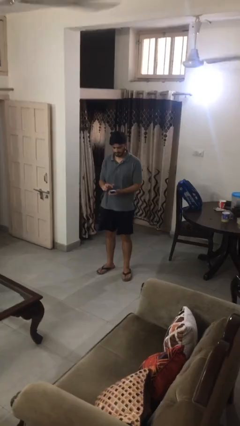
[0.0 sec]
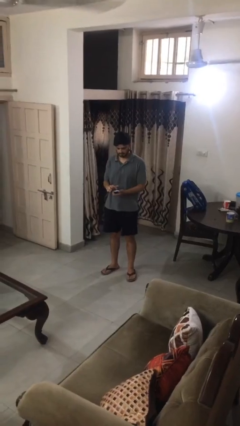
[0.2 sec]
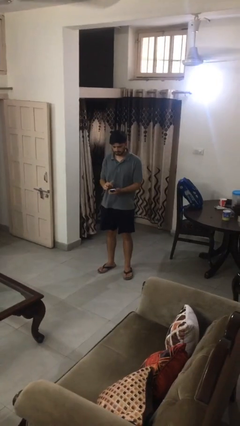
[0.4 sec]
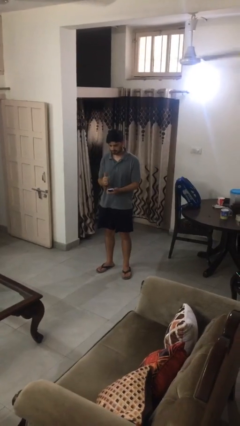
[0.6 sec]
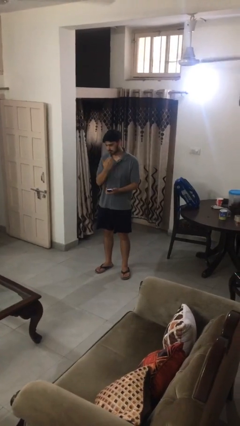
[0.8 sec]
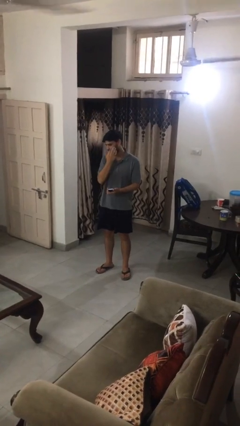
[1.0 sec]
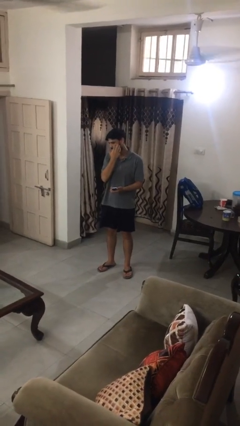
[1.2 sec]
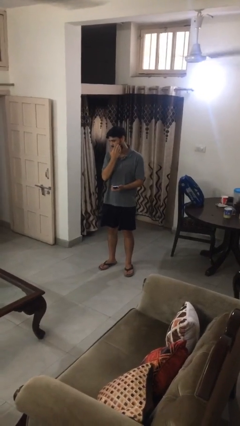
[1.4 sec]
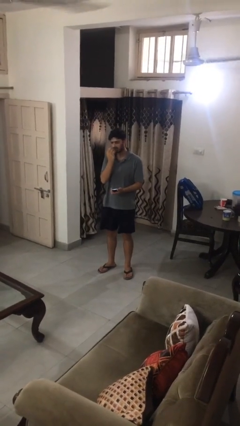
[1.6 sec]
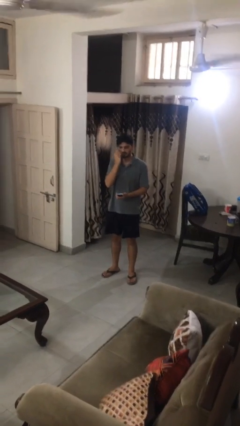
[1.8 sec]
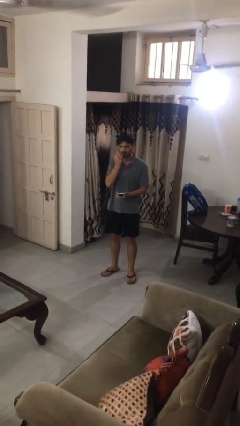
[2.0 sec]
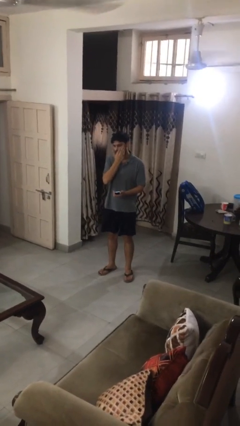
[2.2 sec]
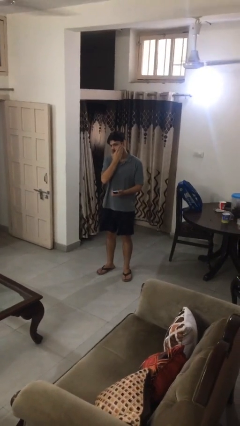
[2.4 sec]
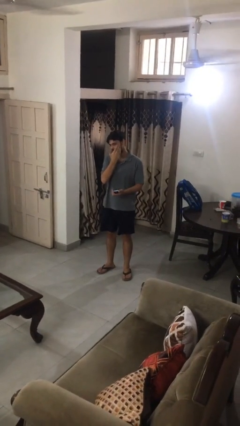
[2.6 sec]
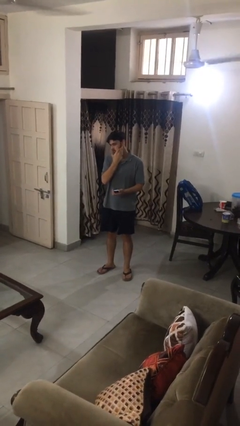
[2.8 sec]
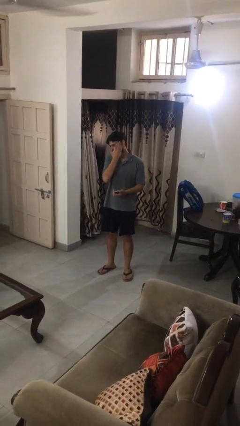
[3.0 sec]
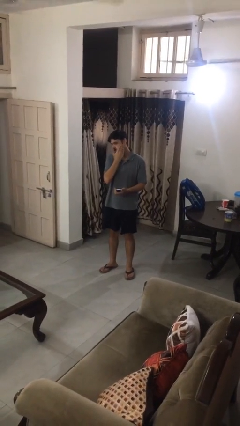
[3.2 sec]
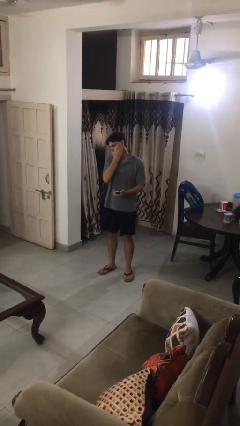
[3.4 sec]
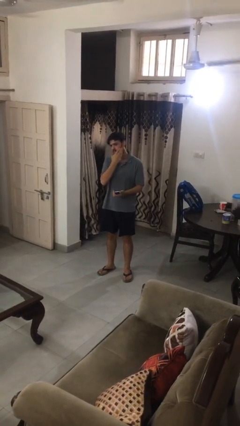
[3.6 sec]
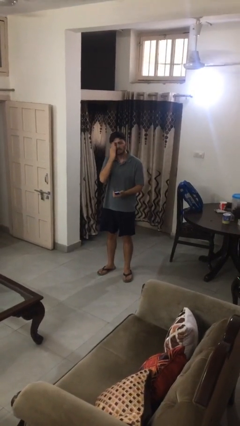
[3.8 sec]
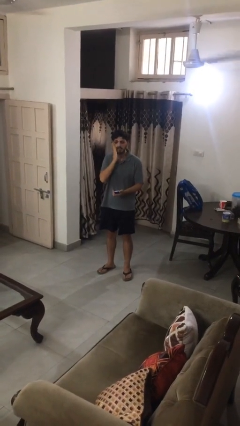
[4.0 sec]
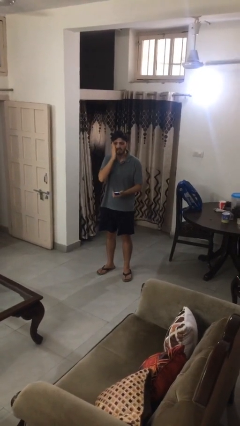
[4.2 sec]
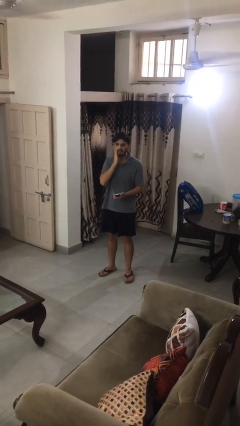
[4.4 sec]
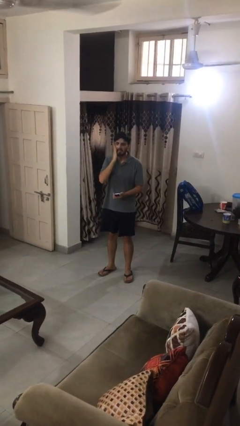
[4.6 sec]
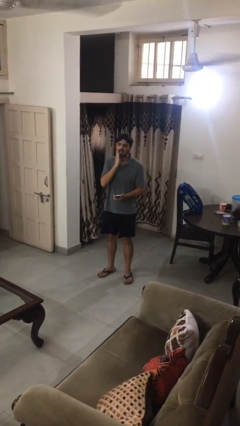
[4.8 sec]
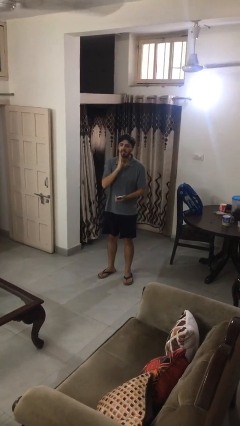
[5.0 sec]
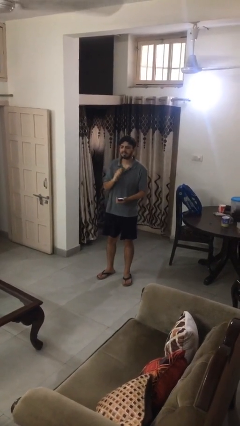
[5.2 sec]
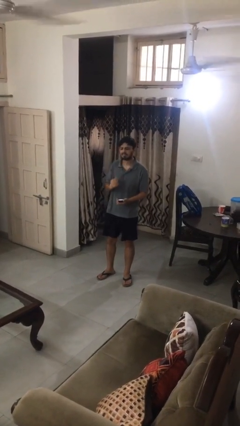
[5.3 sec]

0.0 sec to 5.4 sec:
person applies facial moisturizer

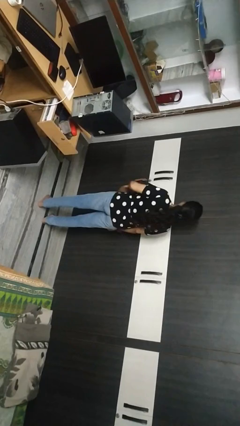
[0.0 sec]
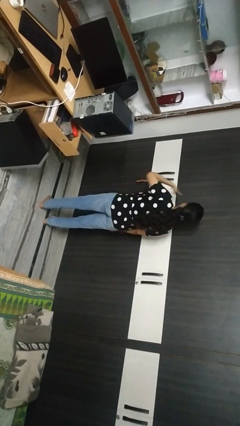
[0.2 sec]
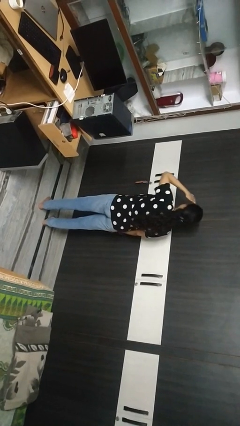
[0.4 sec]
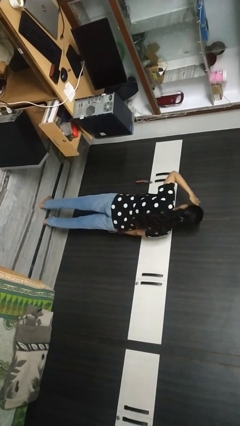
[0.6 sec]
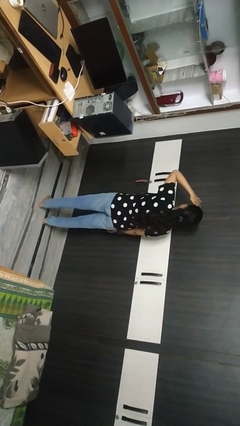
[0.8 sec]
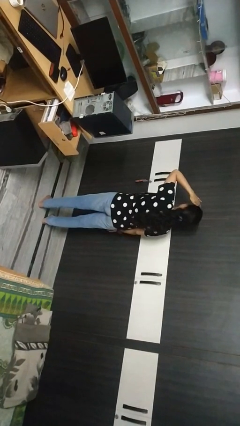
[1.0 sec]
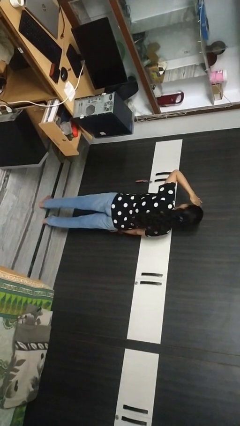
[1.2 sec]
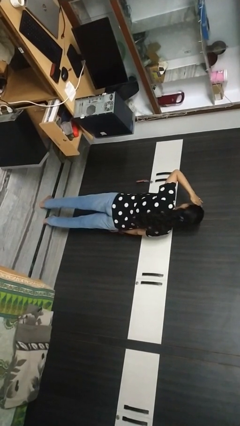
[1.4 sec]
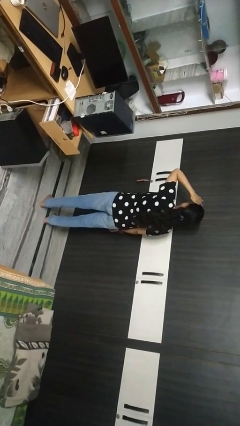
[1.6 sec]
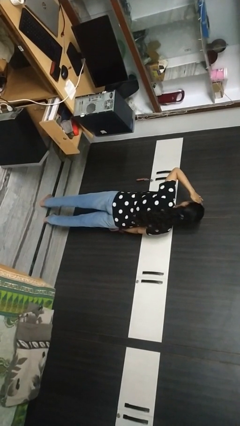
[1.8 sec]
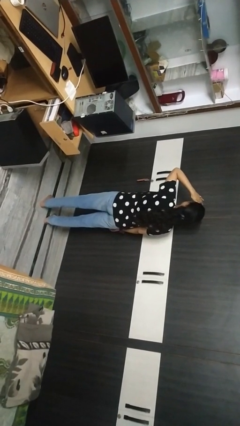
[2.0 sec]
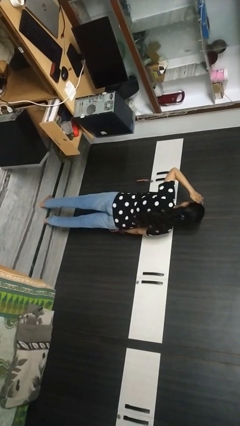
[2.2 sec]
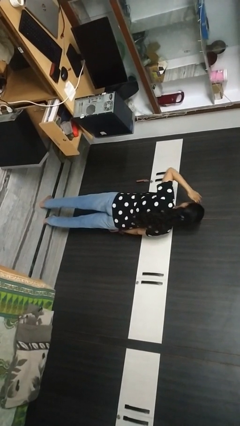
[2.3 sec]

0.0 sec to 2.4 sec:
person shades eyes

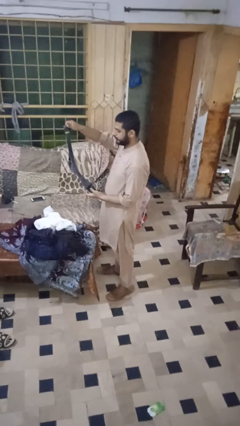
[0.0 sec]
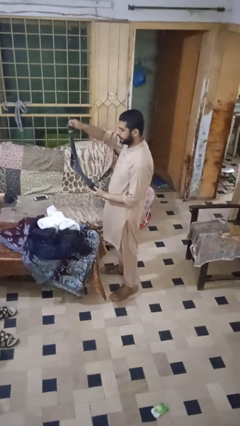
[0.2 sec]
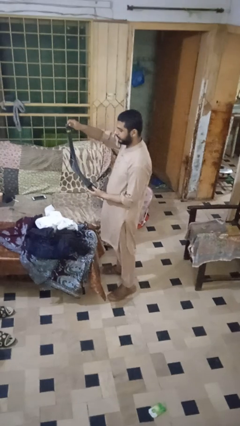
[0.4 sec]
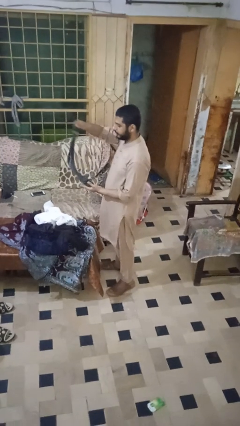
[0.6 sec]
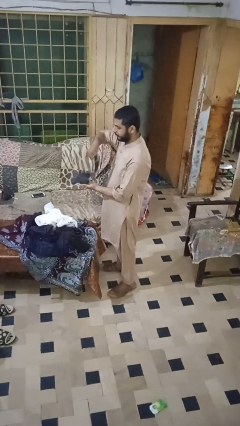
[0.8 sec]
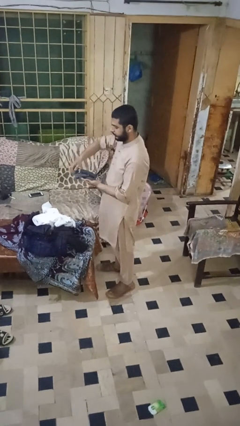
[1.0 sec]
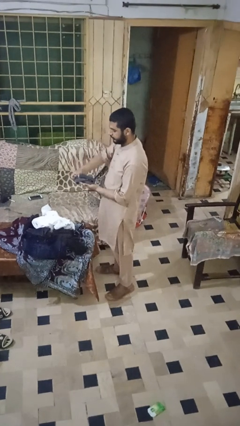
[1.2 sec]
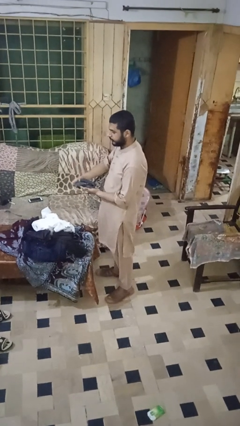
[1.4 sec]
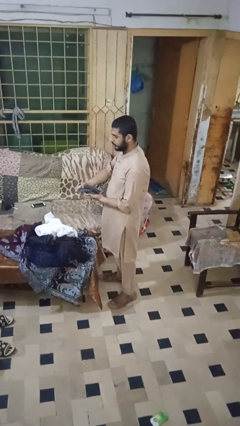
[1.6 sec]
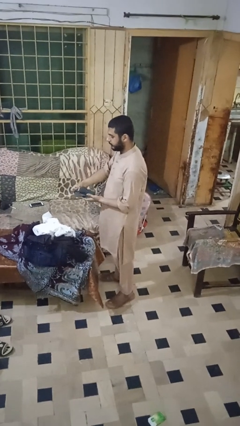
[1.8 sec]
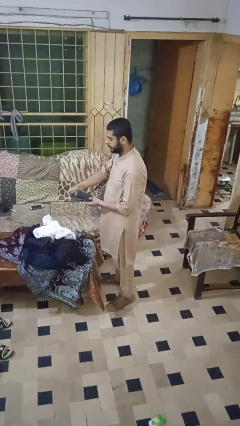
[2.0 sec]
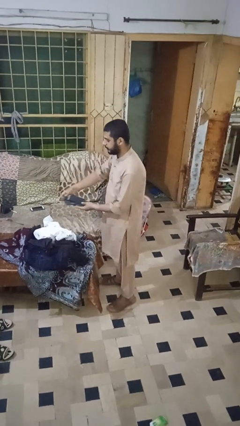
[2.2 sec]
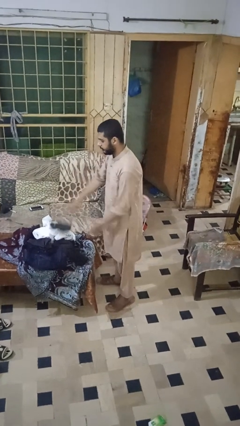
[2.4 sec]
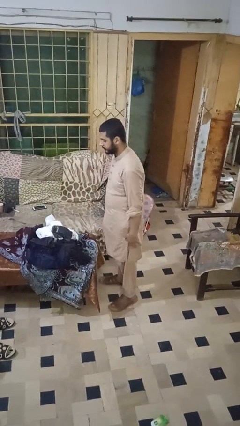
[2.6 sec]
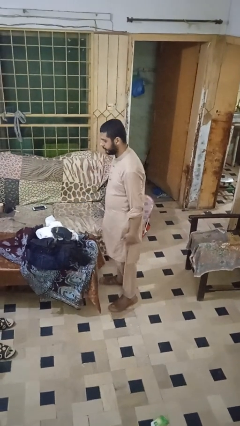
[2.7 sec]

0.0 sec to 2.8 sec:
person folds socks

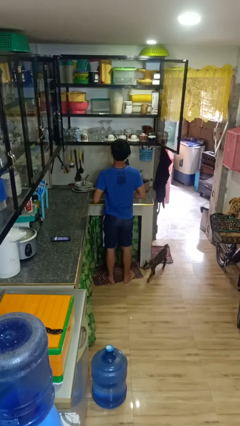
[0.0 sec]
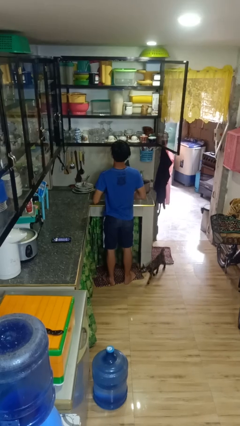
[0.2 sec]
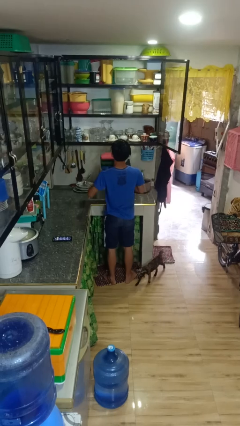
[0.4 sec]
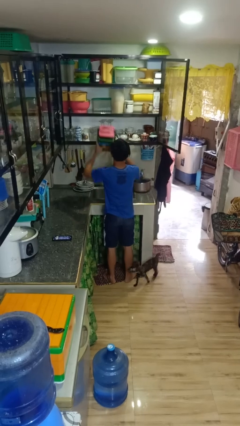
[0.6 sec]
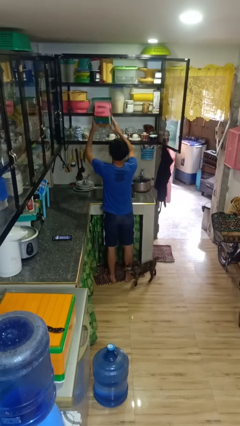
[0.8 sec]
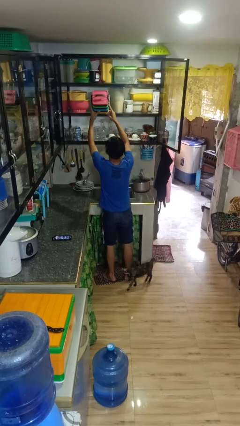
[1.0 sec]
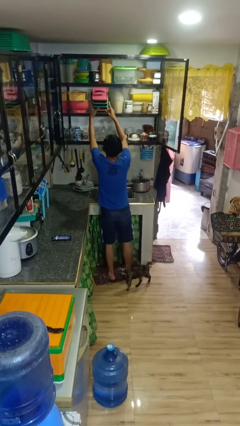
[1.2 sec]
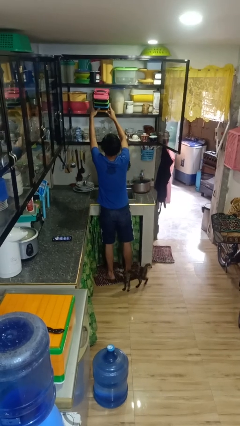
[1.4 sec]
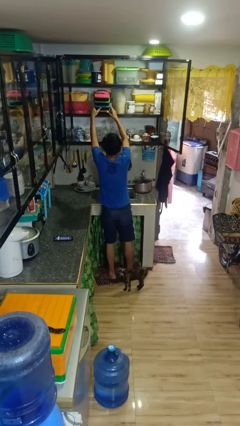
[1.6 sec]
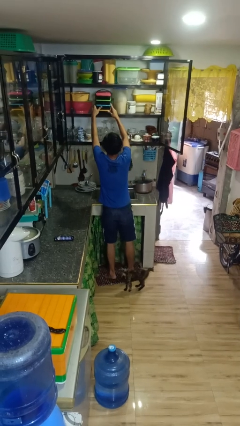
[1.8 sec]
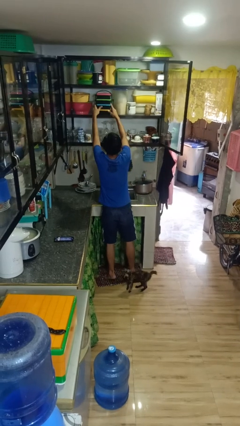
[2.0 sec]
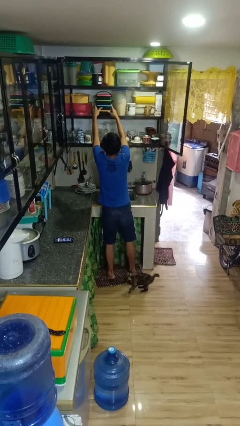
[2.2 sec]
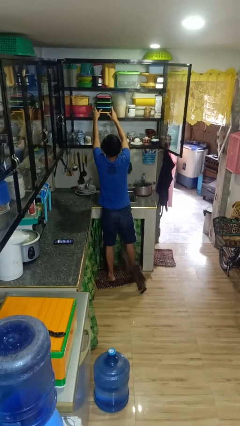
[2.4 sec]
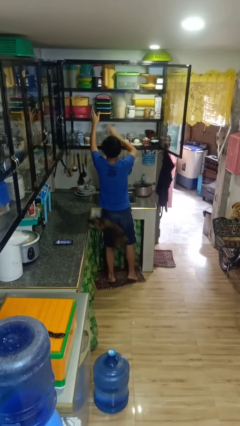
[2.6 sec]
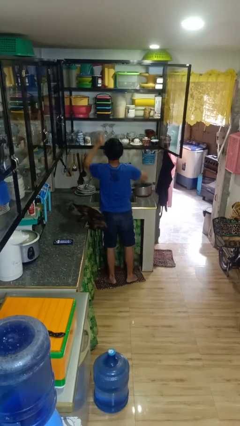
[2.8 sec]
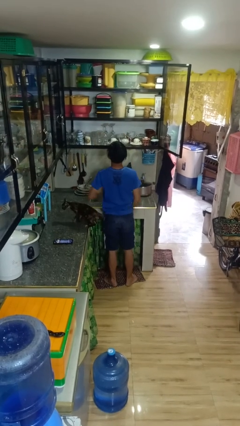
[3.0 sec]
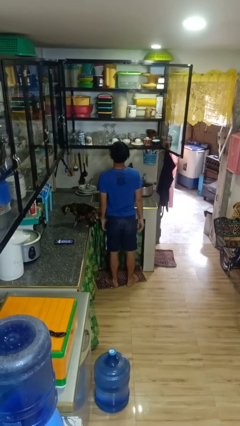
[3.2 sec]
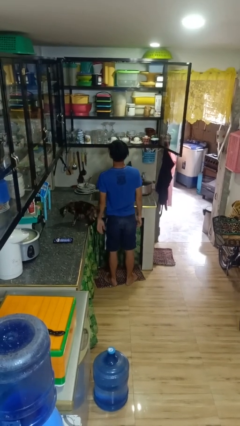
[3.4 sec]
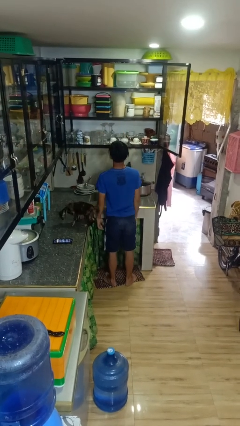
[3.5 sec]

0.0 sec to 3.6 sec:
person puts down object into cabinet

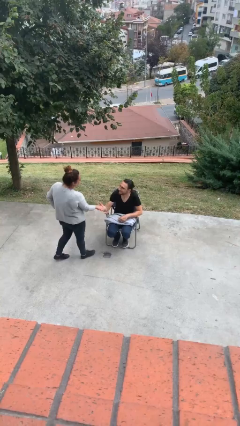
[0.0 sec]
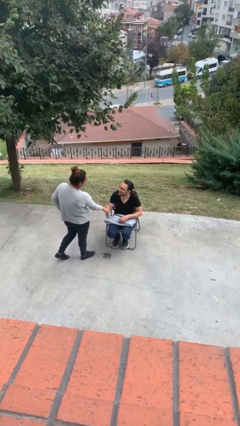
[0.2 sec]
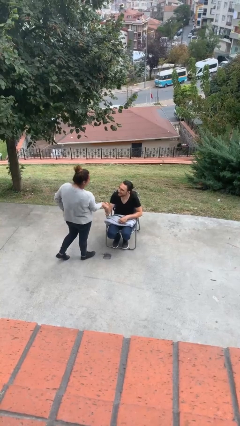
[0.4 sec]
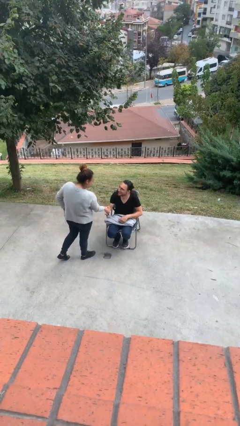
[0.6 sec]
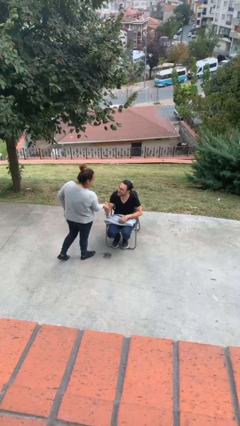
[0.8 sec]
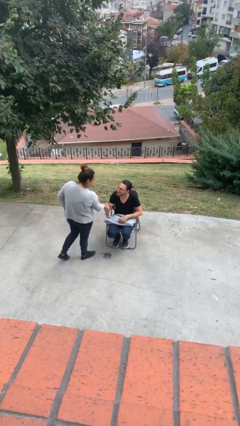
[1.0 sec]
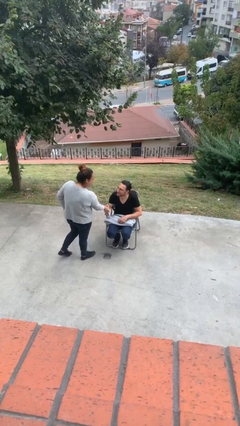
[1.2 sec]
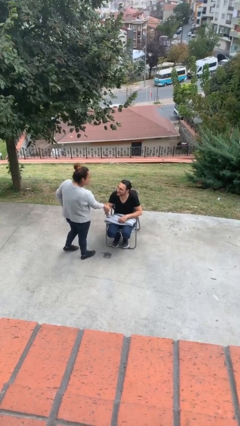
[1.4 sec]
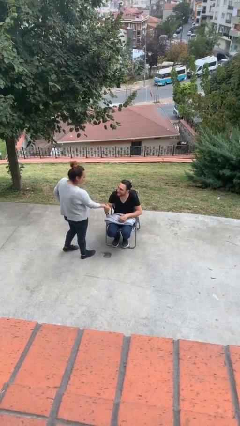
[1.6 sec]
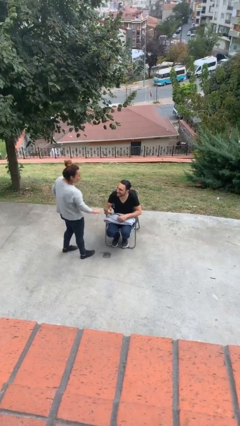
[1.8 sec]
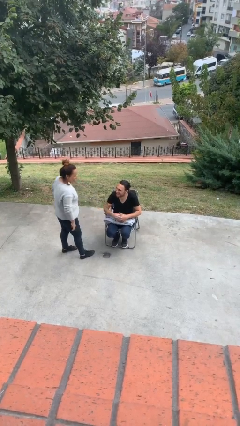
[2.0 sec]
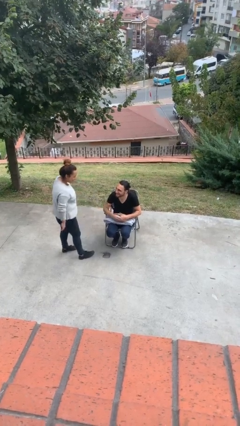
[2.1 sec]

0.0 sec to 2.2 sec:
person shakes hand

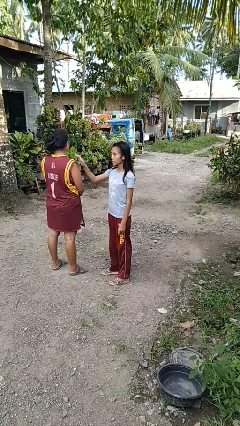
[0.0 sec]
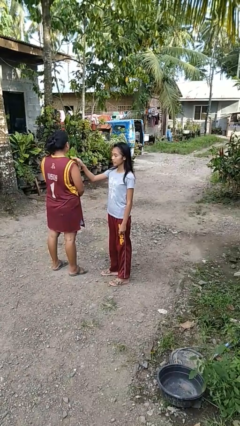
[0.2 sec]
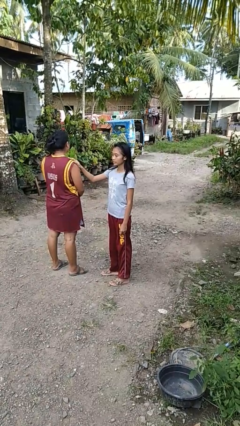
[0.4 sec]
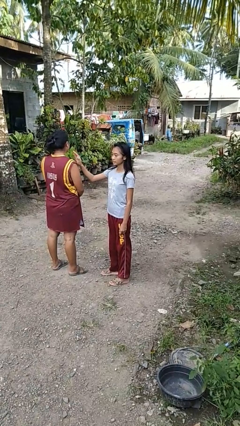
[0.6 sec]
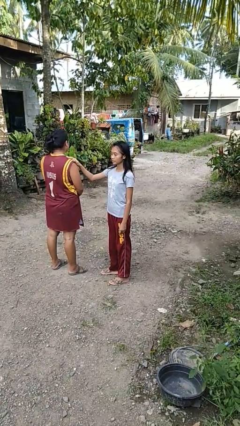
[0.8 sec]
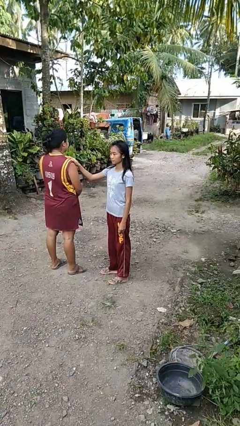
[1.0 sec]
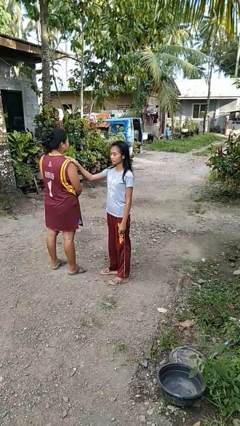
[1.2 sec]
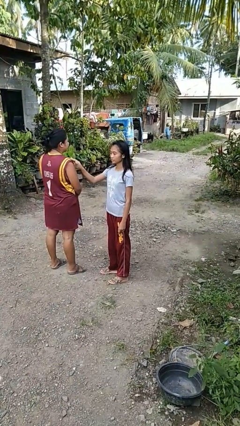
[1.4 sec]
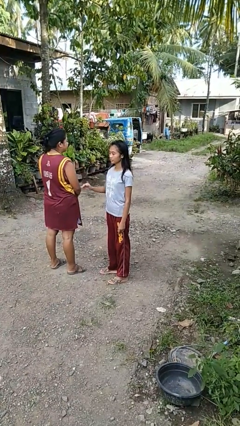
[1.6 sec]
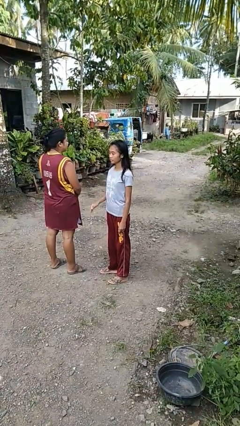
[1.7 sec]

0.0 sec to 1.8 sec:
person pounds shoulders of person
